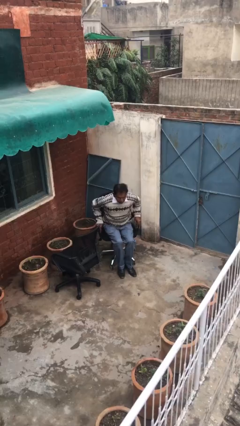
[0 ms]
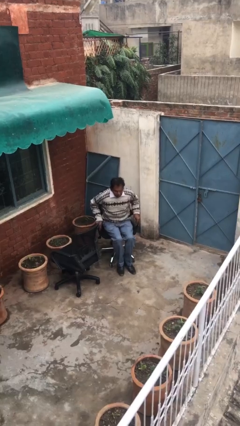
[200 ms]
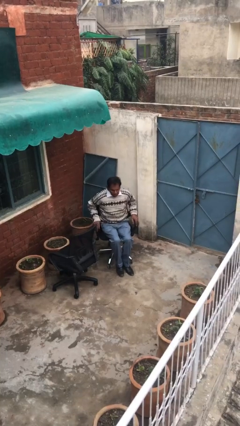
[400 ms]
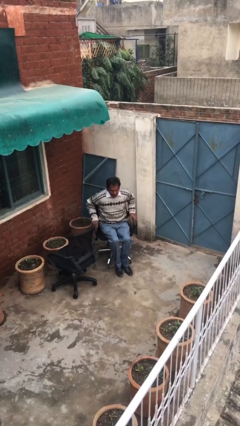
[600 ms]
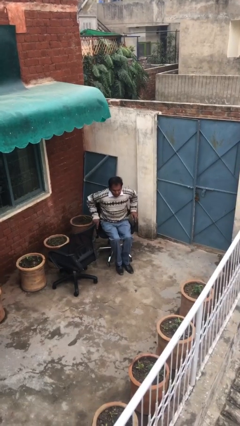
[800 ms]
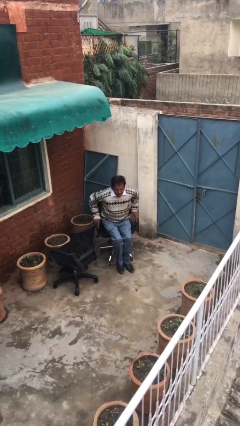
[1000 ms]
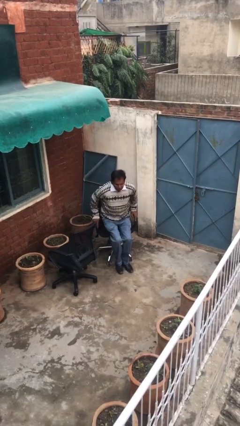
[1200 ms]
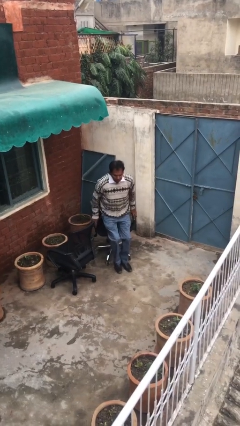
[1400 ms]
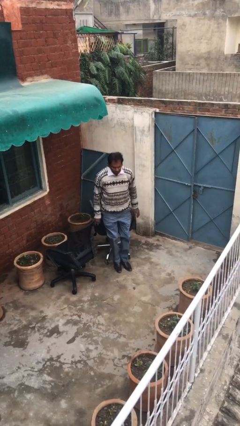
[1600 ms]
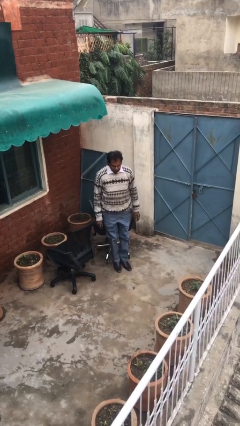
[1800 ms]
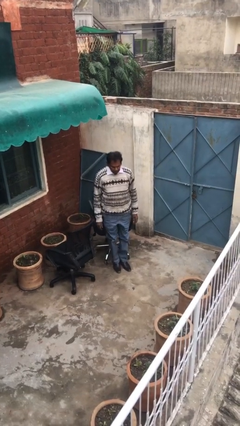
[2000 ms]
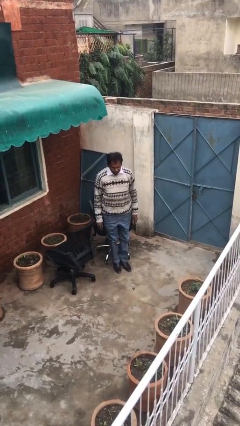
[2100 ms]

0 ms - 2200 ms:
person stands up

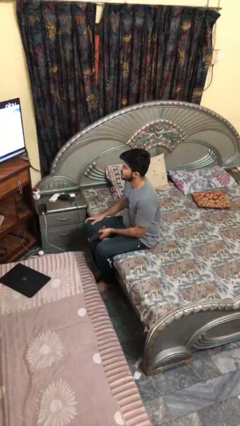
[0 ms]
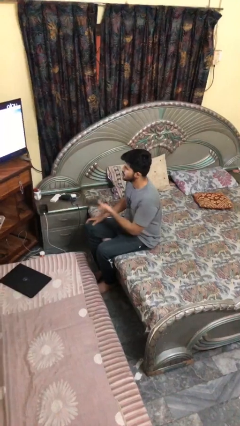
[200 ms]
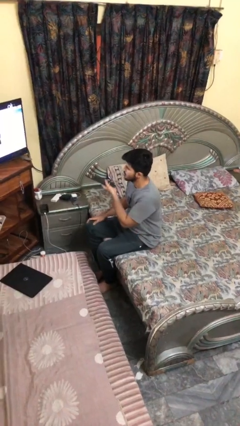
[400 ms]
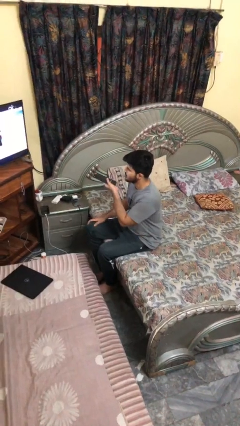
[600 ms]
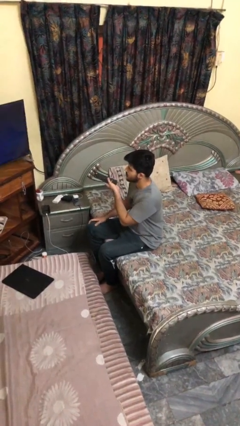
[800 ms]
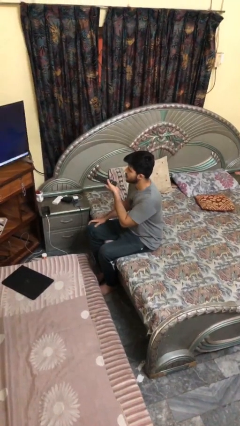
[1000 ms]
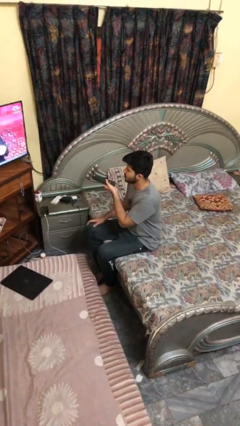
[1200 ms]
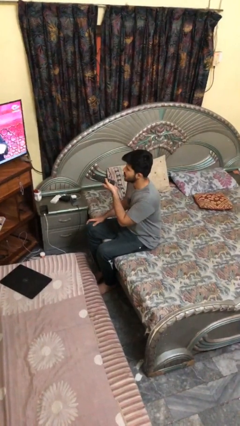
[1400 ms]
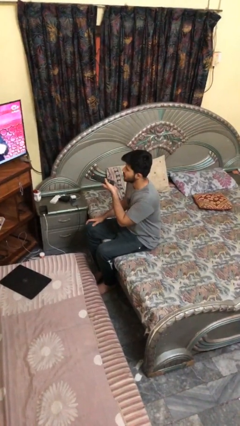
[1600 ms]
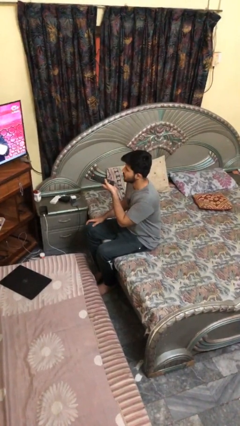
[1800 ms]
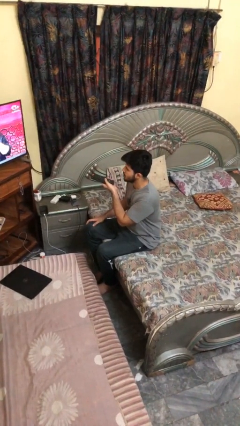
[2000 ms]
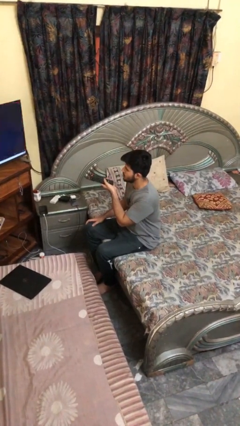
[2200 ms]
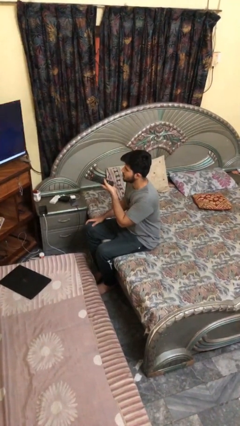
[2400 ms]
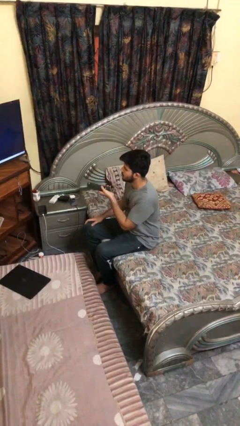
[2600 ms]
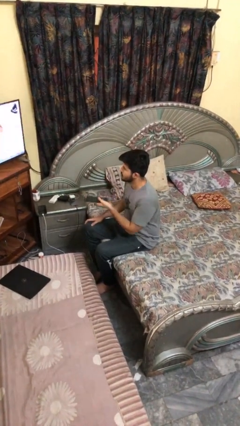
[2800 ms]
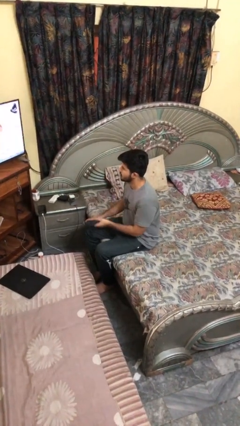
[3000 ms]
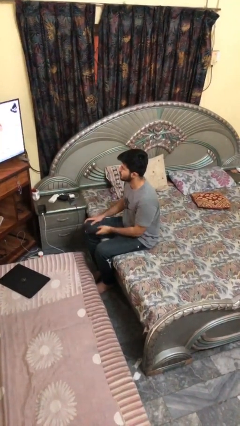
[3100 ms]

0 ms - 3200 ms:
person uses television remote

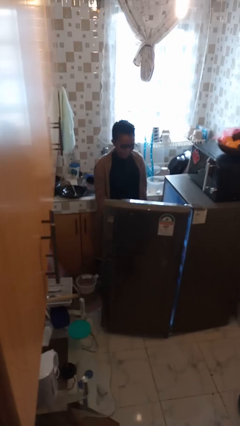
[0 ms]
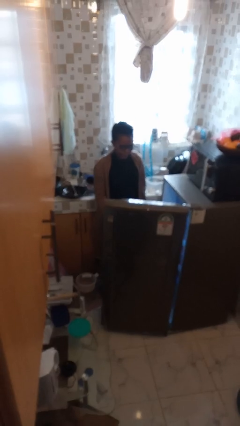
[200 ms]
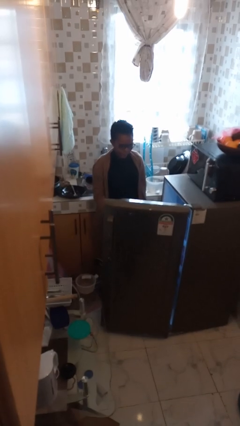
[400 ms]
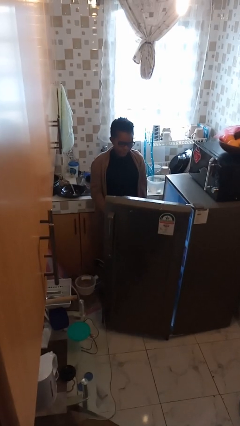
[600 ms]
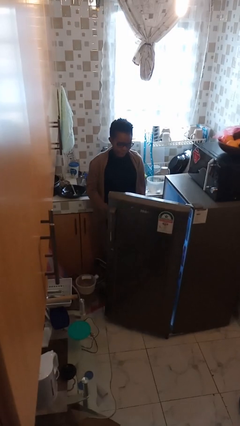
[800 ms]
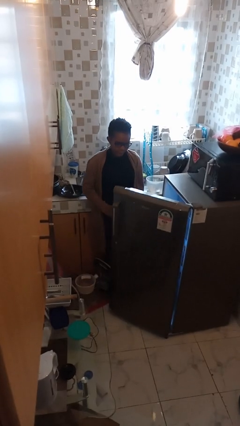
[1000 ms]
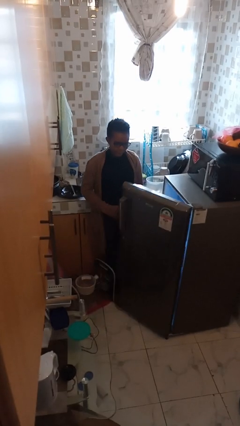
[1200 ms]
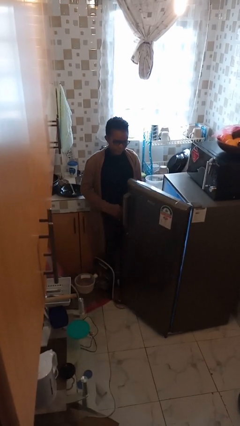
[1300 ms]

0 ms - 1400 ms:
person closes refrigerator

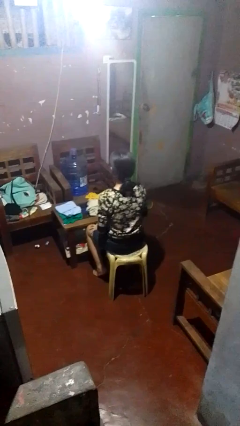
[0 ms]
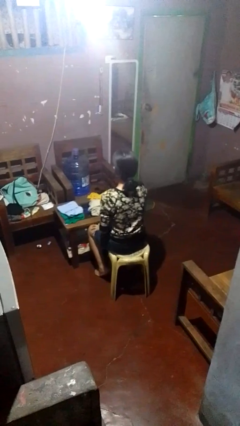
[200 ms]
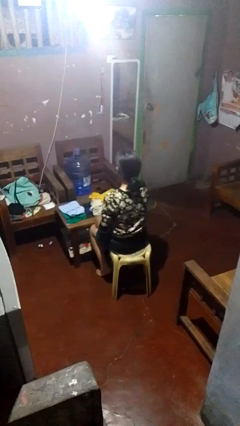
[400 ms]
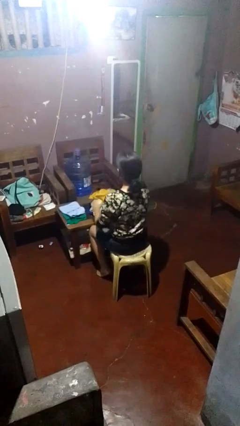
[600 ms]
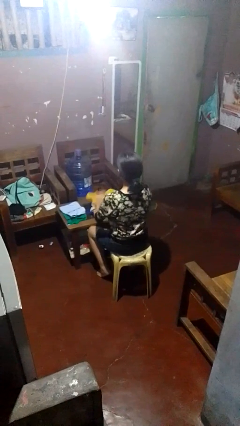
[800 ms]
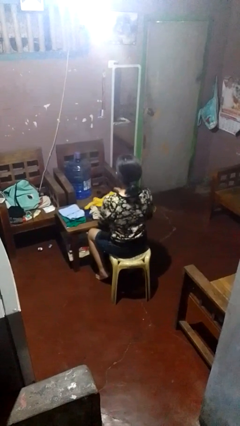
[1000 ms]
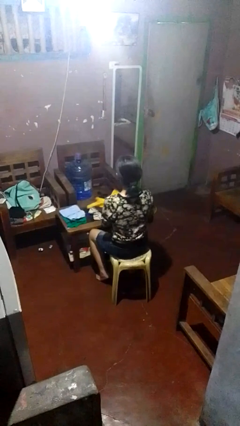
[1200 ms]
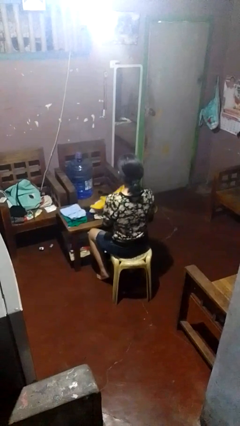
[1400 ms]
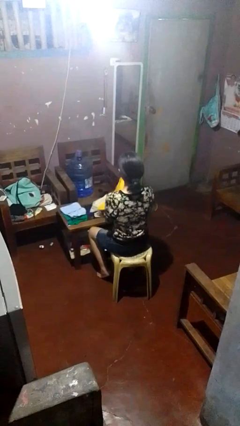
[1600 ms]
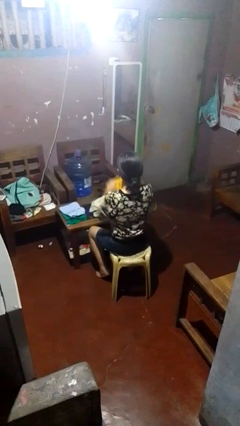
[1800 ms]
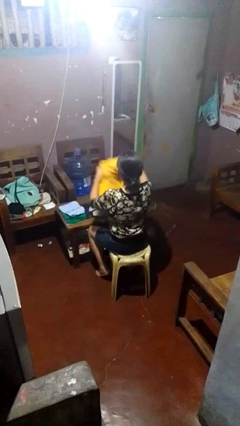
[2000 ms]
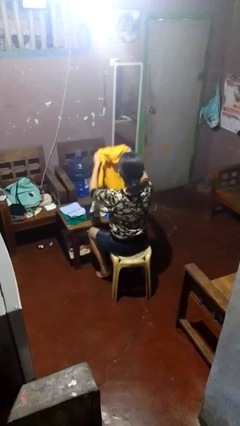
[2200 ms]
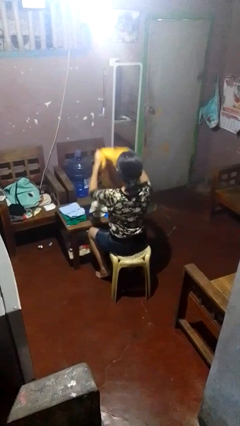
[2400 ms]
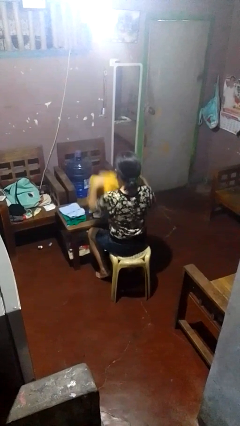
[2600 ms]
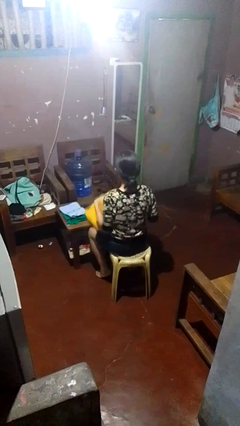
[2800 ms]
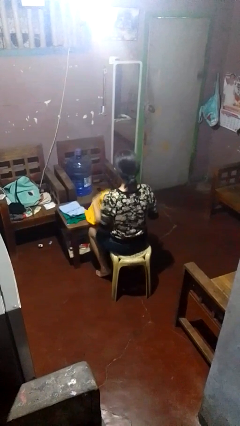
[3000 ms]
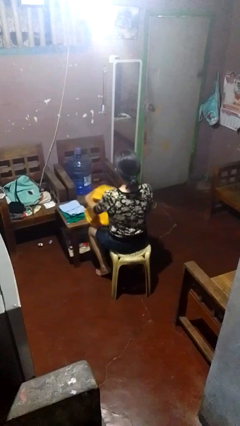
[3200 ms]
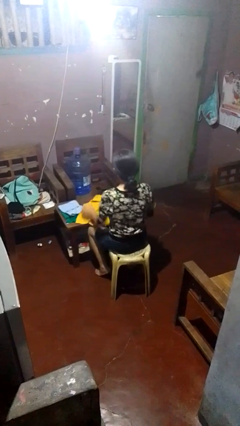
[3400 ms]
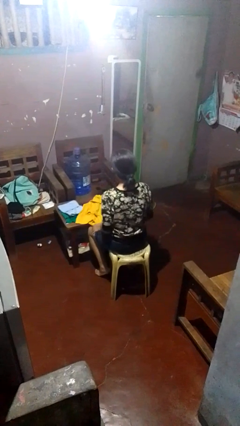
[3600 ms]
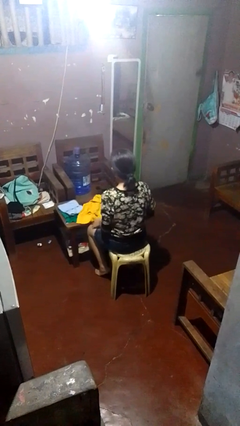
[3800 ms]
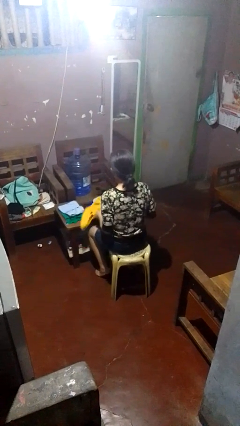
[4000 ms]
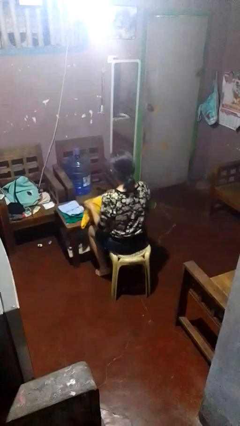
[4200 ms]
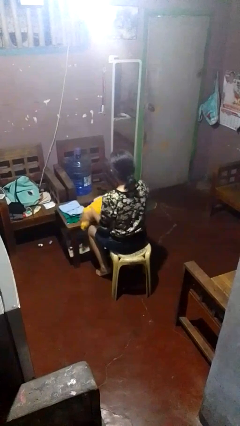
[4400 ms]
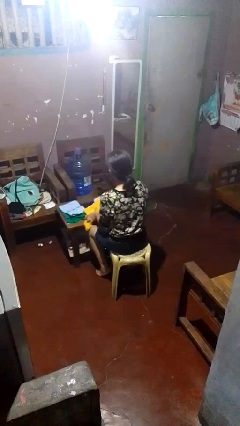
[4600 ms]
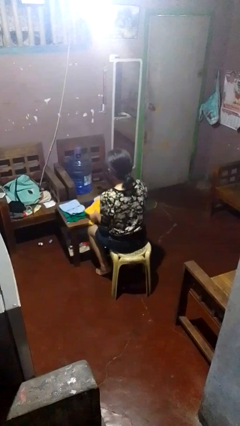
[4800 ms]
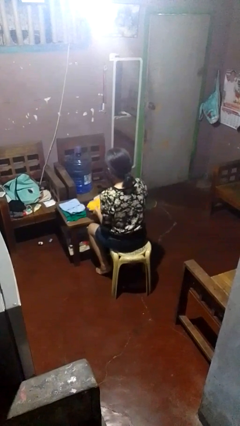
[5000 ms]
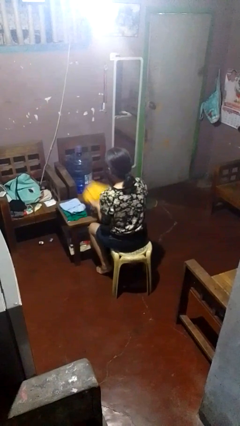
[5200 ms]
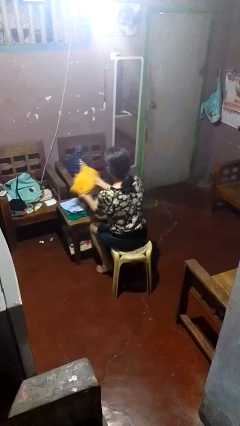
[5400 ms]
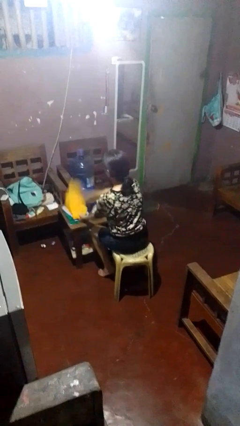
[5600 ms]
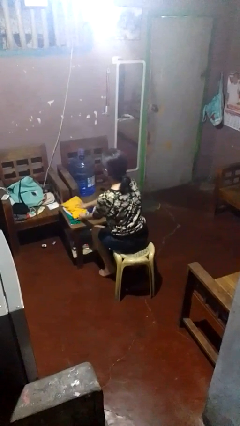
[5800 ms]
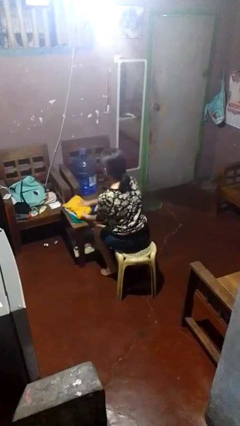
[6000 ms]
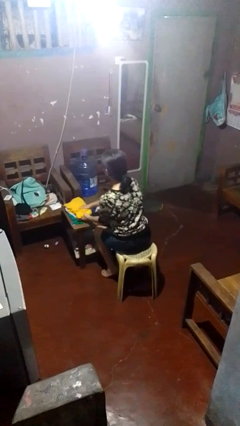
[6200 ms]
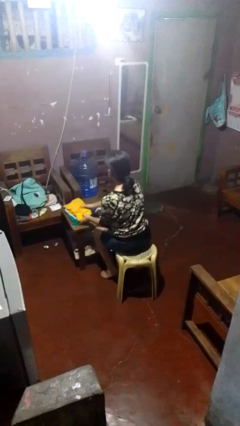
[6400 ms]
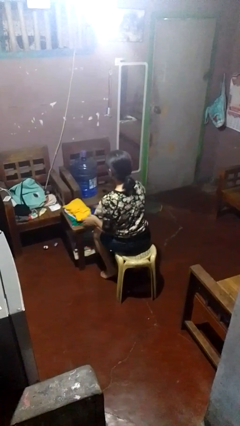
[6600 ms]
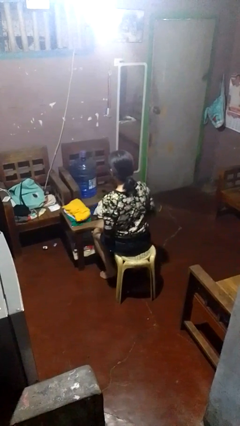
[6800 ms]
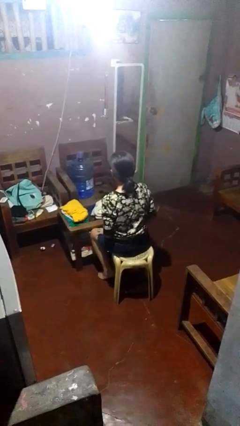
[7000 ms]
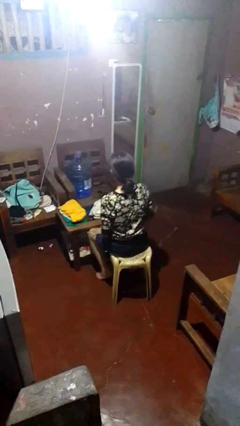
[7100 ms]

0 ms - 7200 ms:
person folds shirt

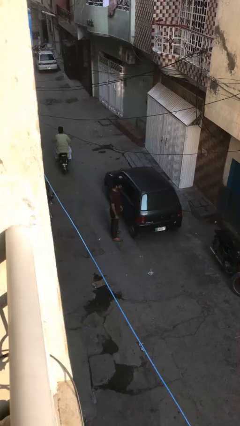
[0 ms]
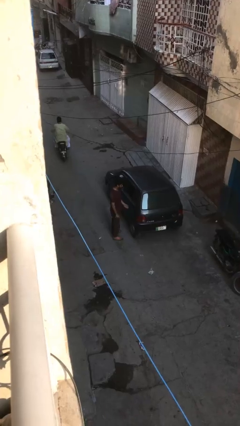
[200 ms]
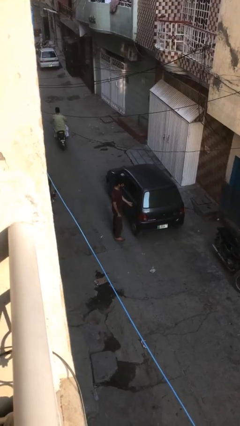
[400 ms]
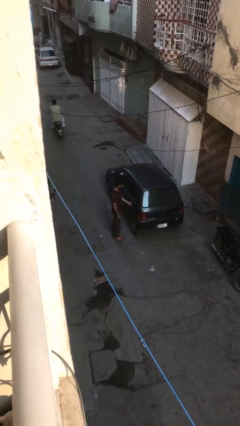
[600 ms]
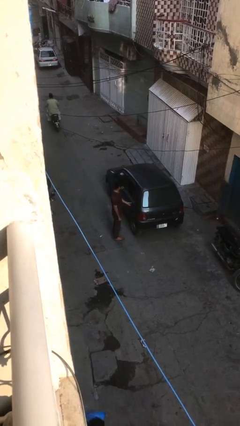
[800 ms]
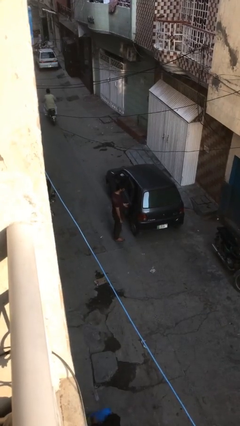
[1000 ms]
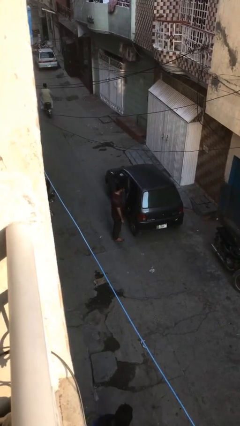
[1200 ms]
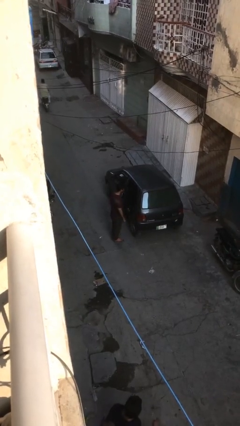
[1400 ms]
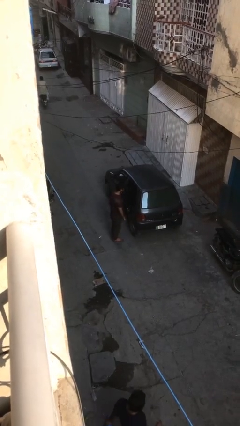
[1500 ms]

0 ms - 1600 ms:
person opens car door

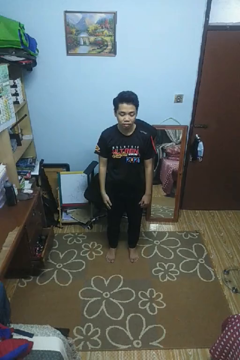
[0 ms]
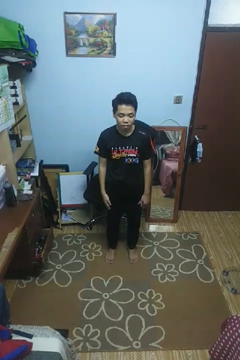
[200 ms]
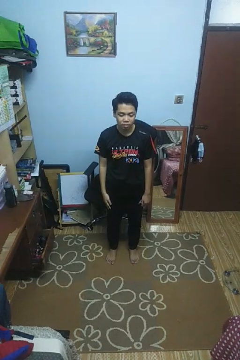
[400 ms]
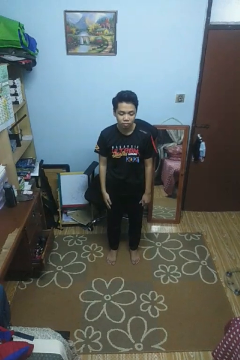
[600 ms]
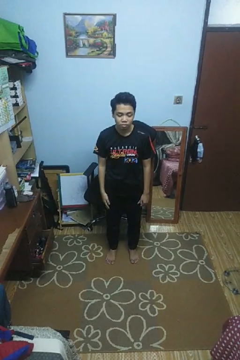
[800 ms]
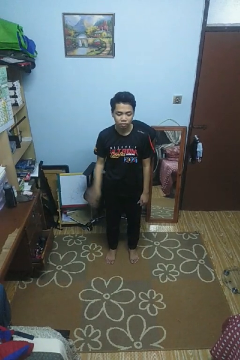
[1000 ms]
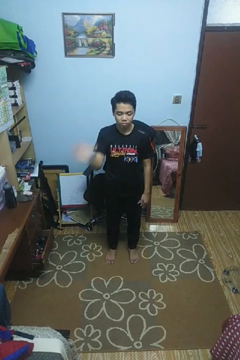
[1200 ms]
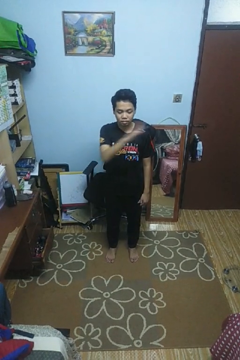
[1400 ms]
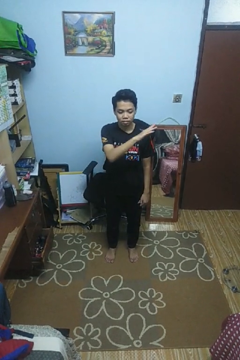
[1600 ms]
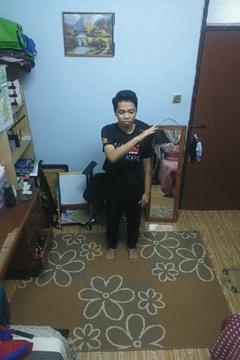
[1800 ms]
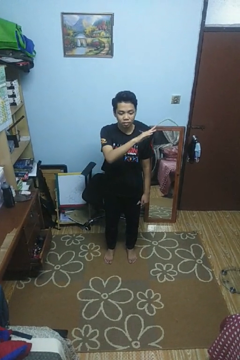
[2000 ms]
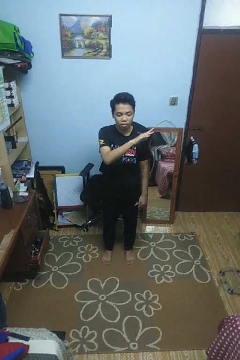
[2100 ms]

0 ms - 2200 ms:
person gestures swipe left
